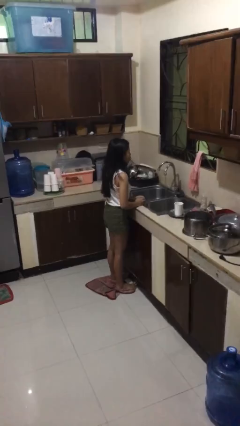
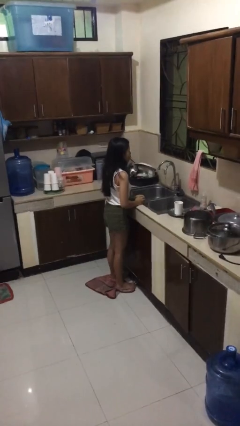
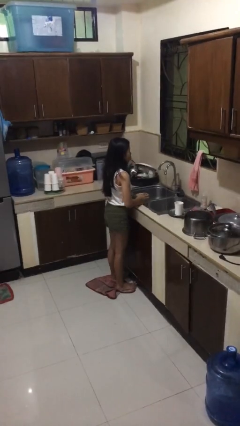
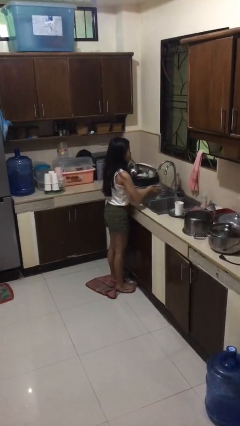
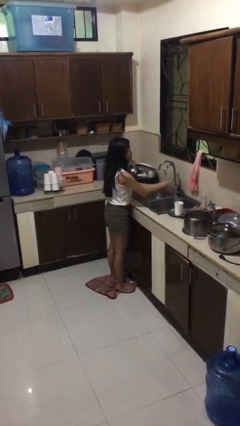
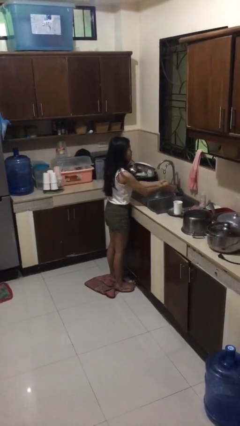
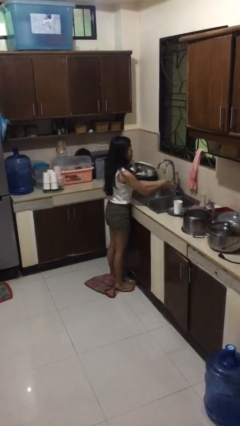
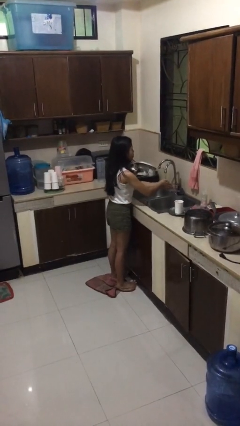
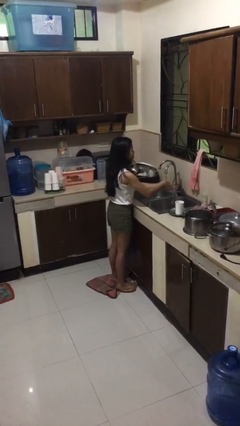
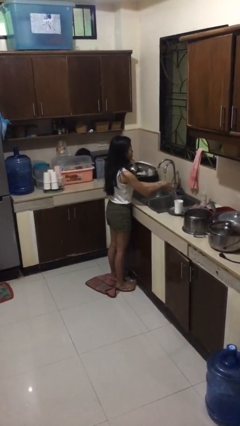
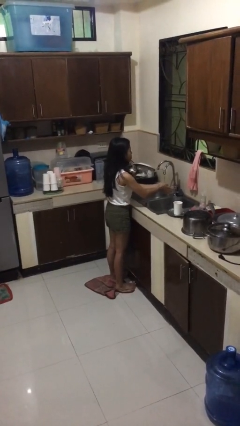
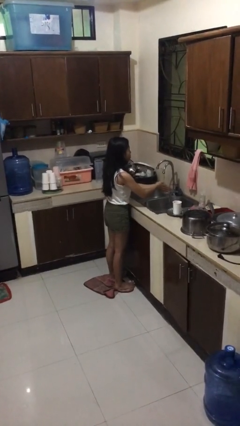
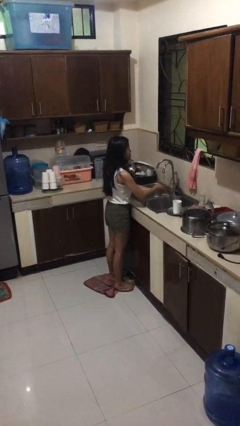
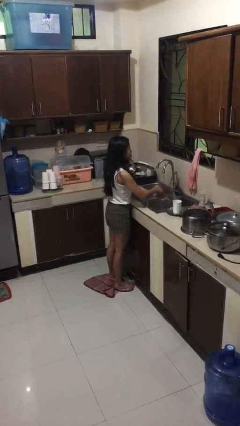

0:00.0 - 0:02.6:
person washes hands

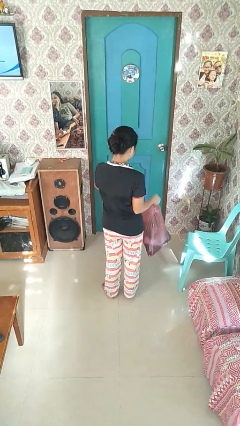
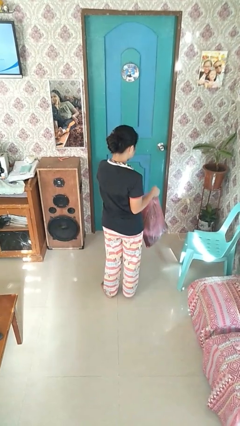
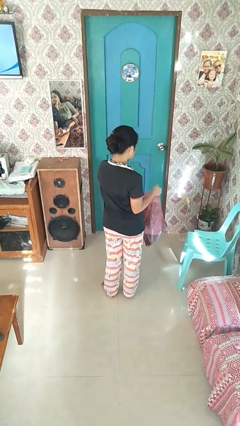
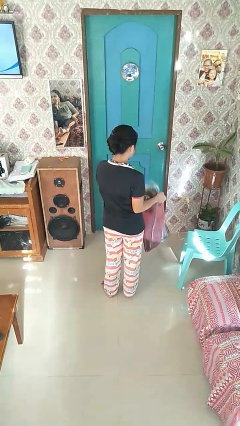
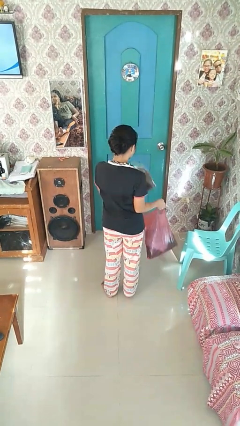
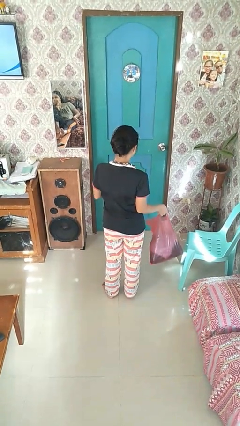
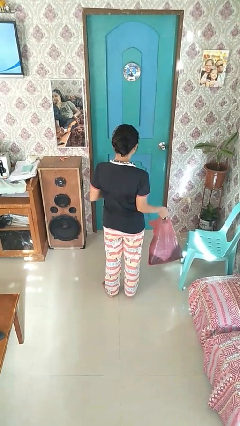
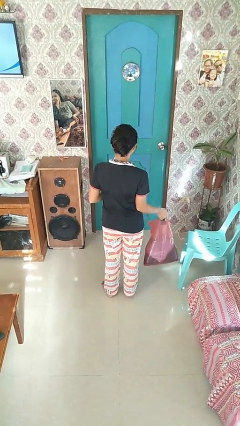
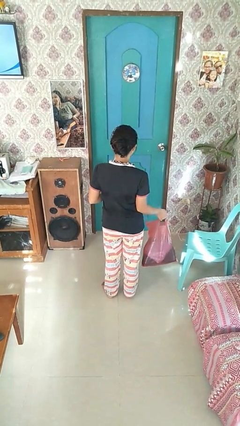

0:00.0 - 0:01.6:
person takes object from bag

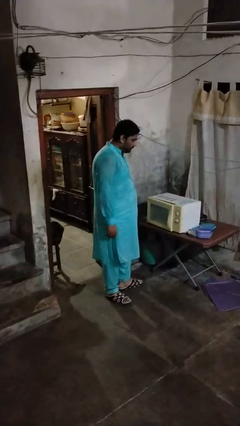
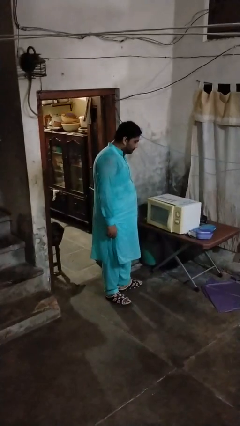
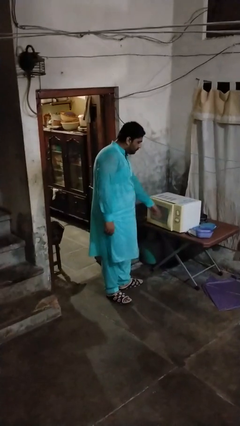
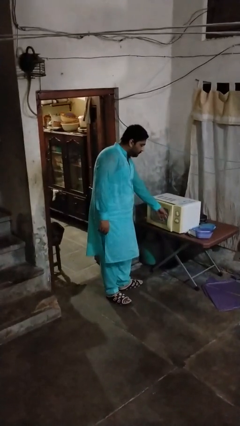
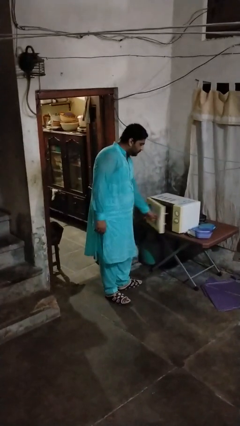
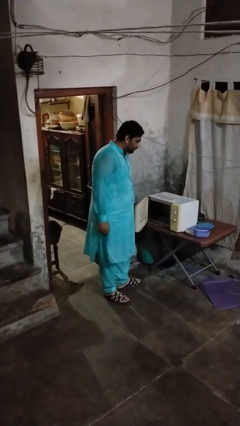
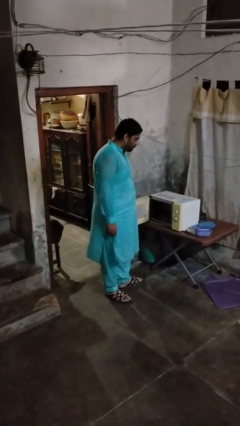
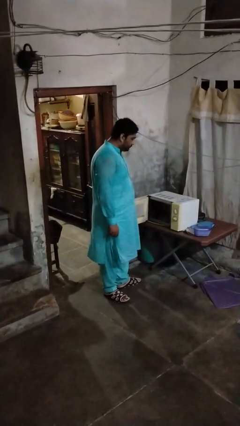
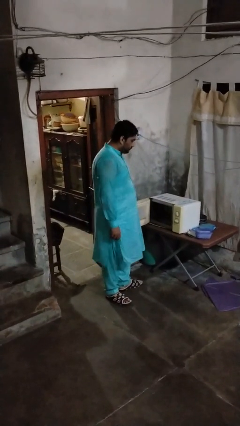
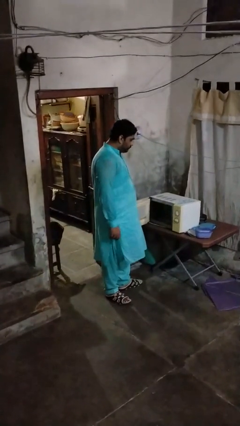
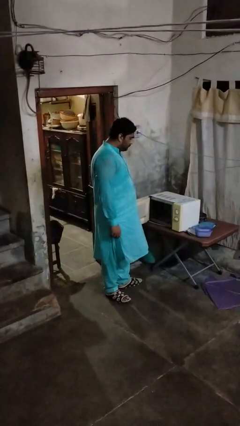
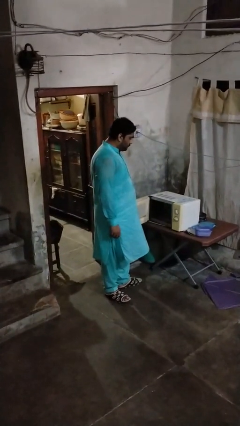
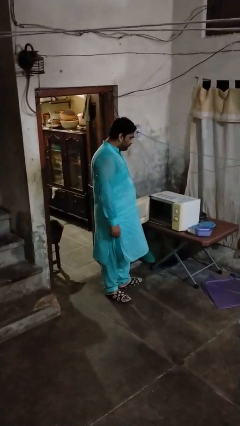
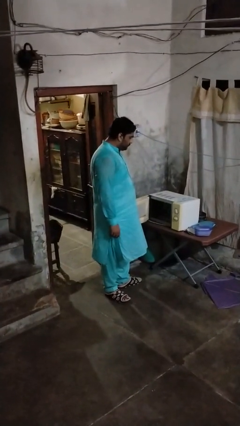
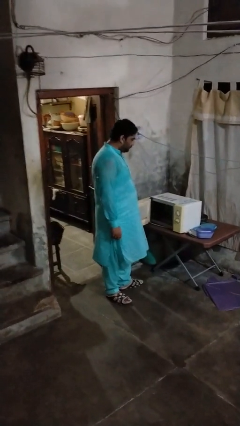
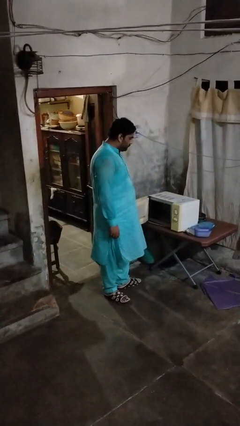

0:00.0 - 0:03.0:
person opens microwave

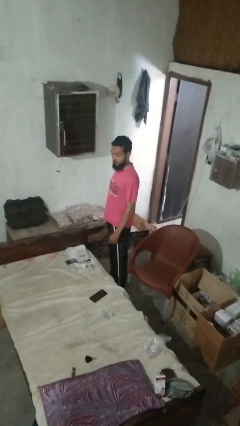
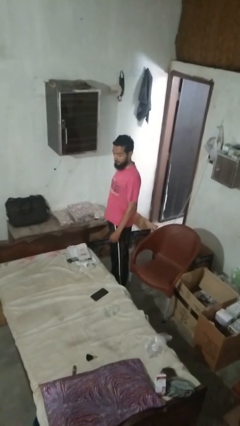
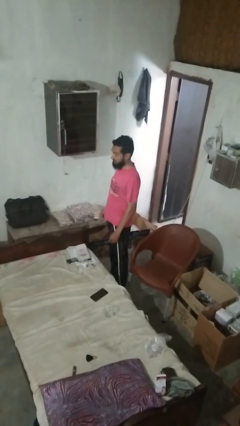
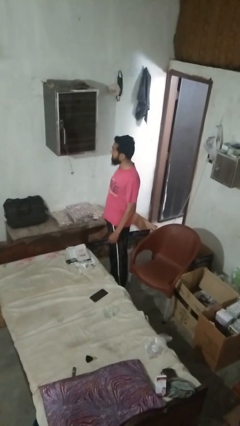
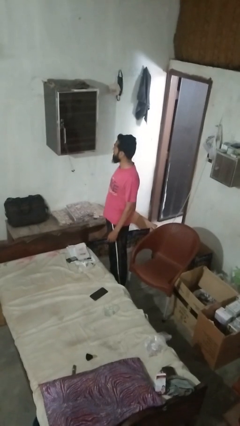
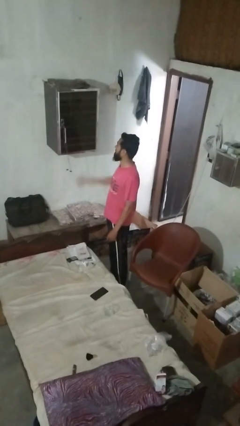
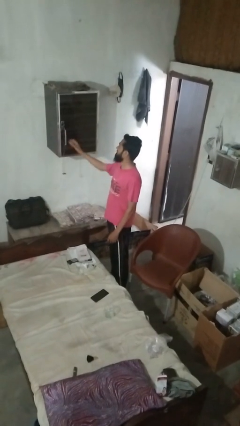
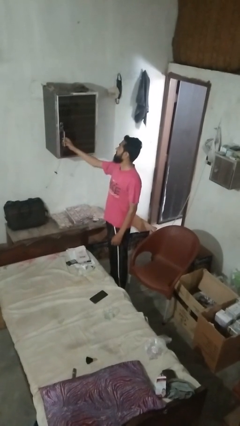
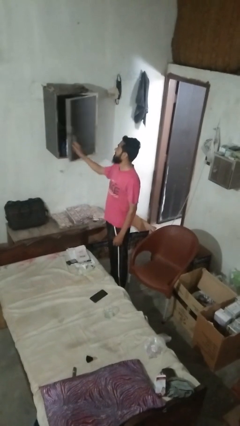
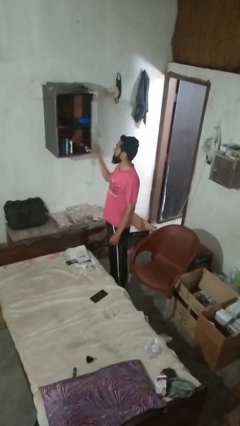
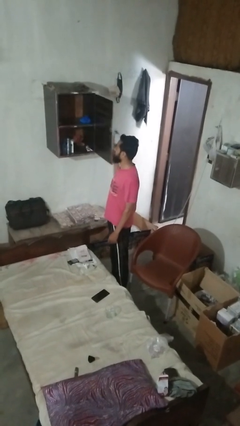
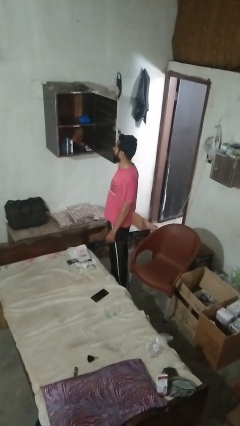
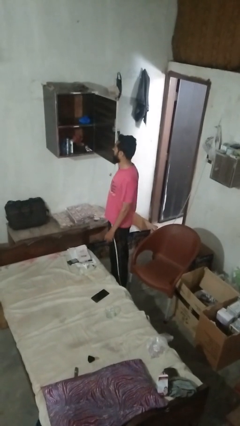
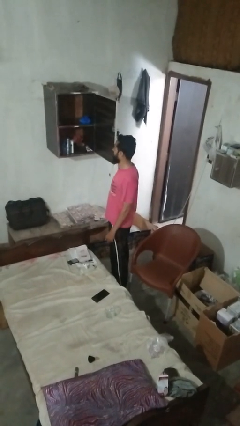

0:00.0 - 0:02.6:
person opens dresser drawer

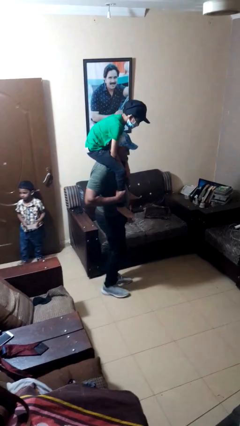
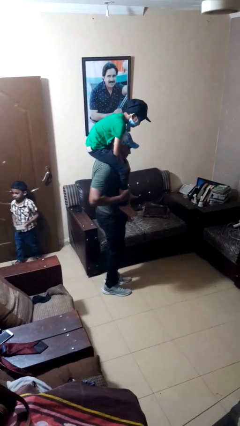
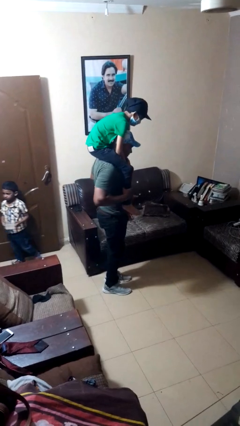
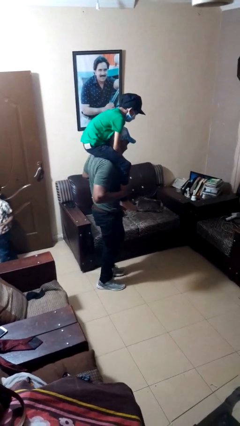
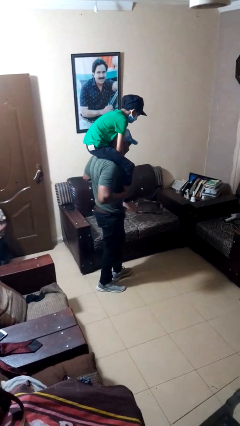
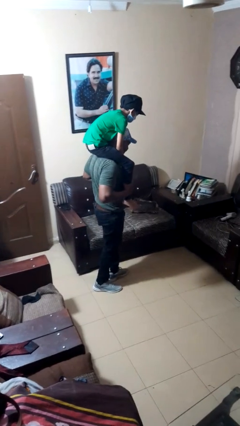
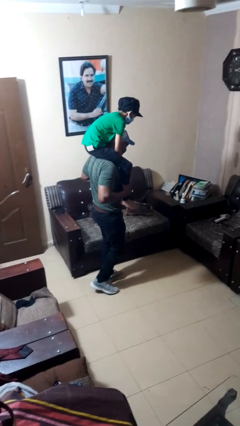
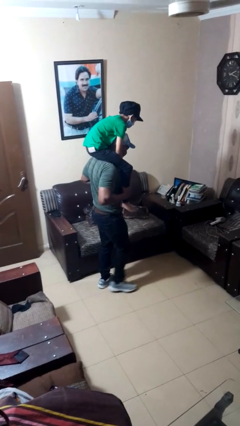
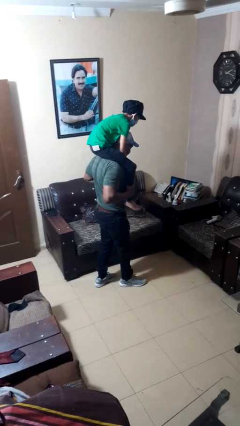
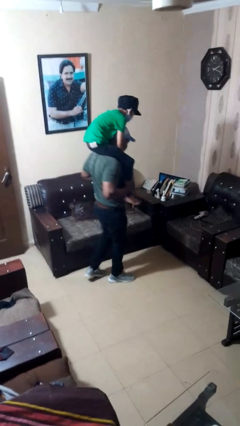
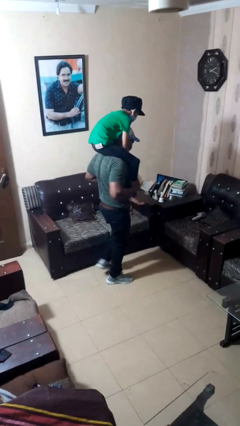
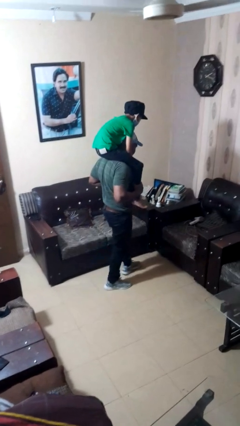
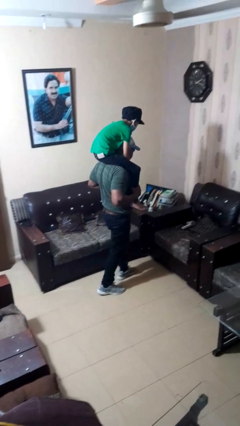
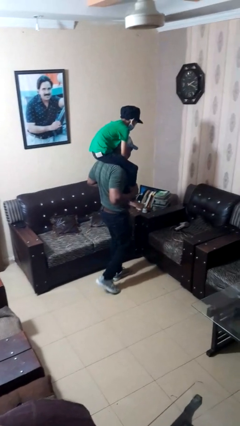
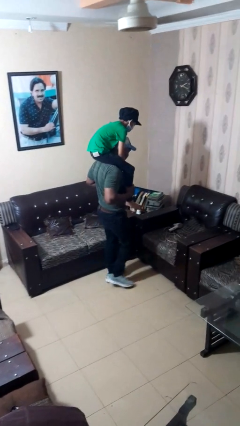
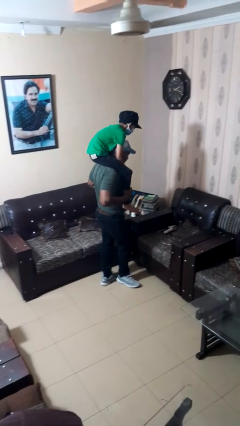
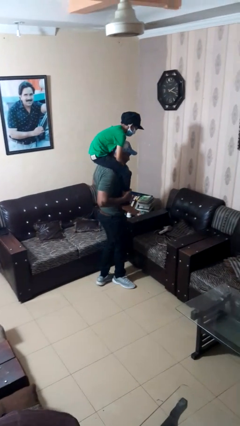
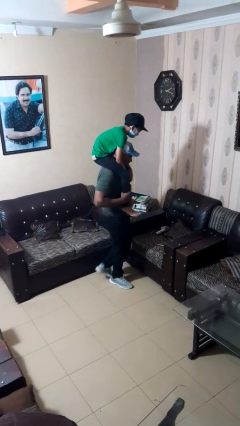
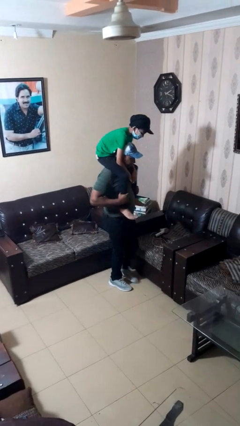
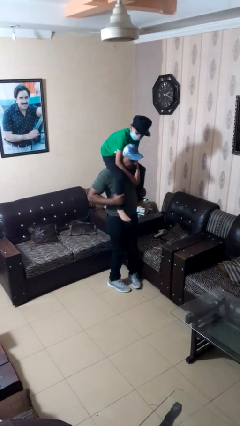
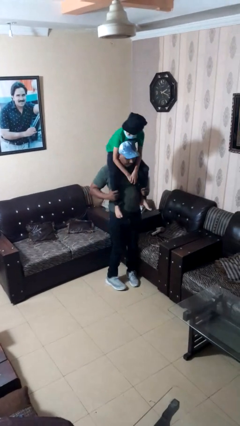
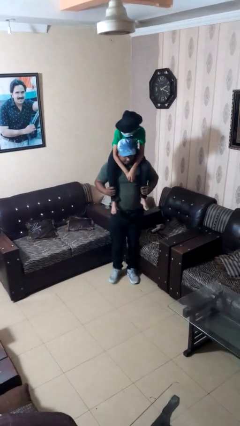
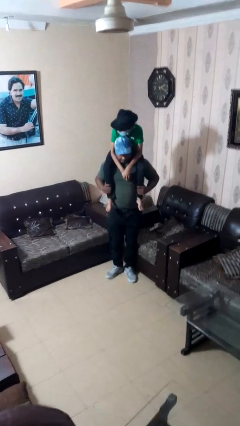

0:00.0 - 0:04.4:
person carries person on shoulders

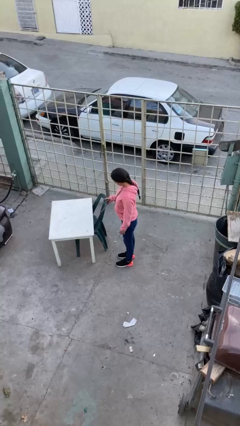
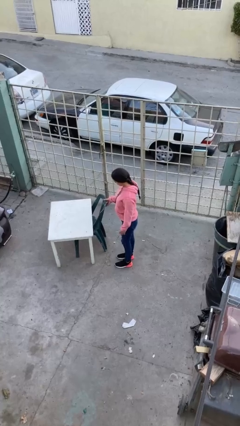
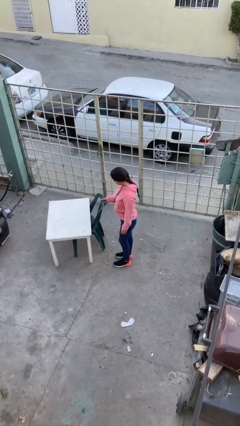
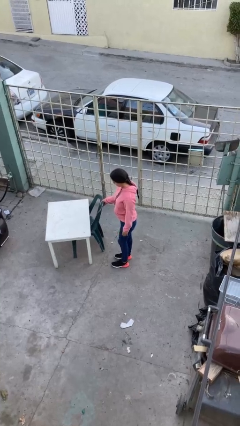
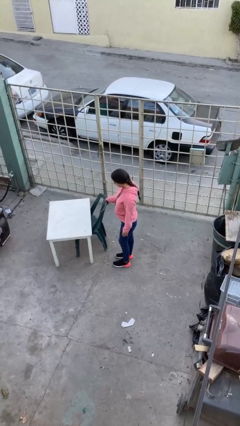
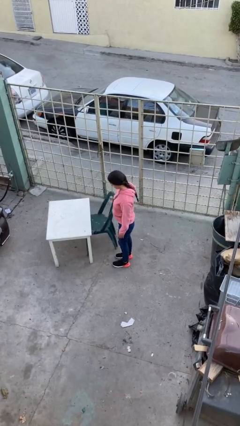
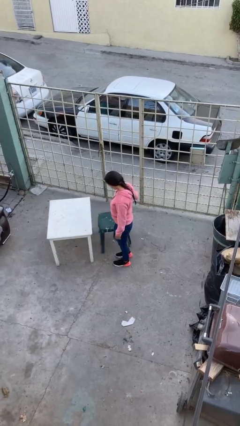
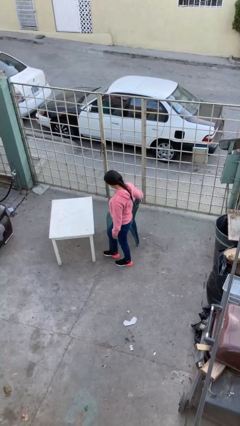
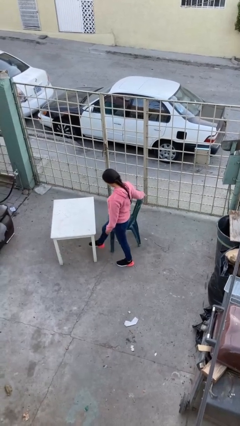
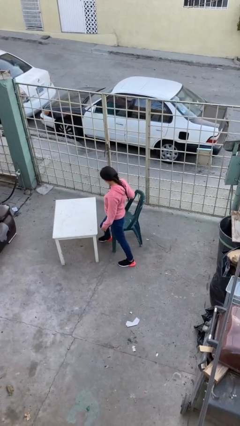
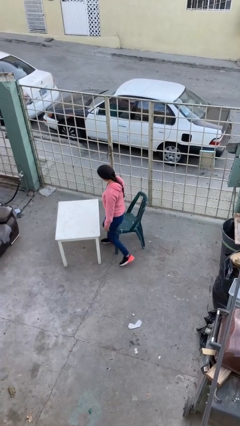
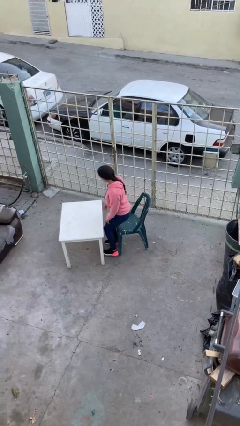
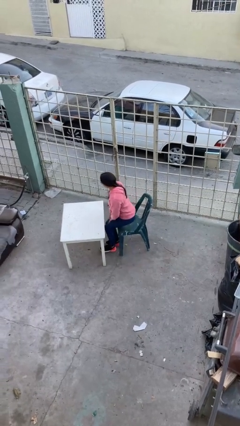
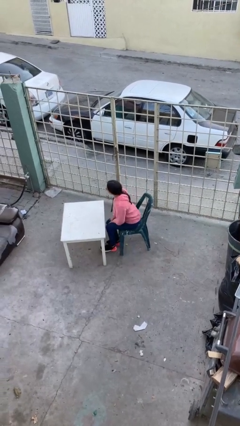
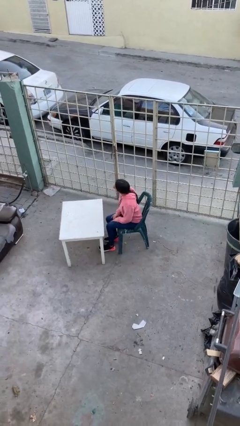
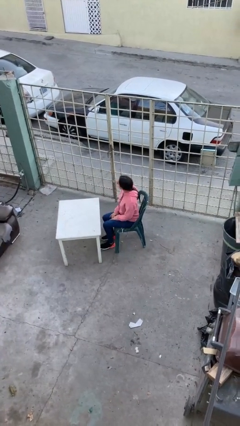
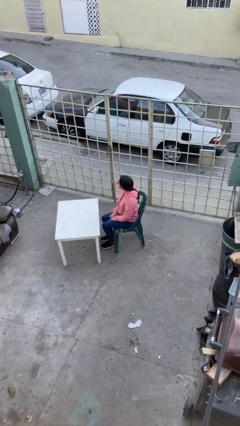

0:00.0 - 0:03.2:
person sits down
